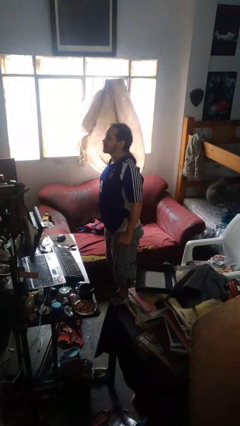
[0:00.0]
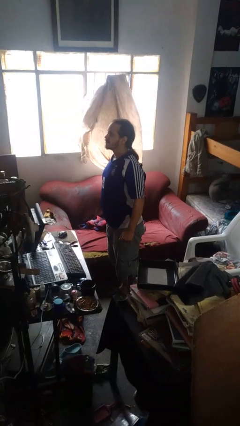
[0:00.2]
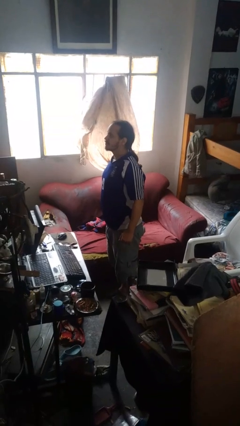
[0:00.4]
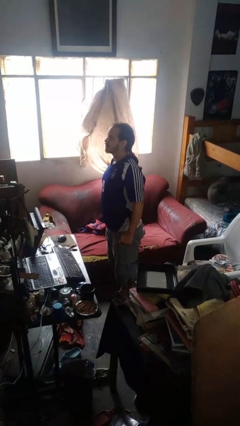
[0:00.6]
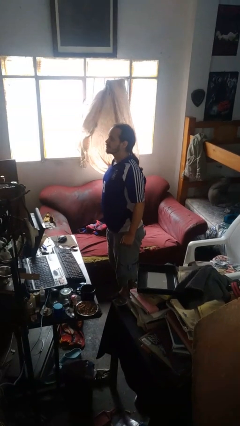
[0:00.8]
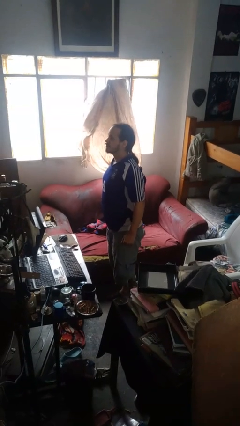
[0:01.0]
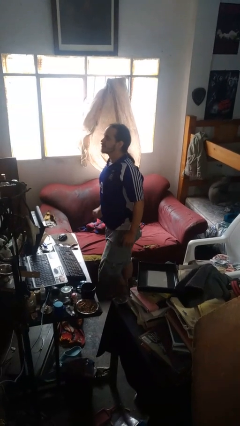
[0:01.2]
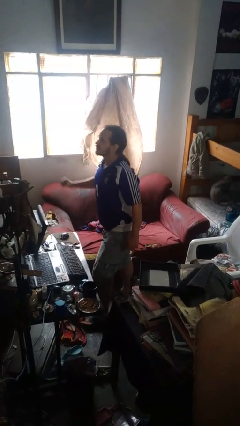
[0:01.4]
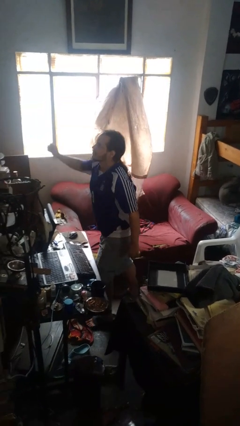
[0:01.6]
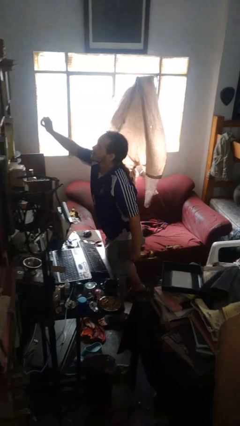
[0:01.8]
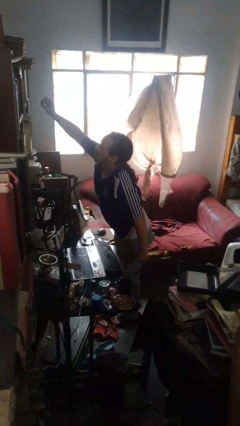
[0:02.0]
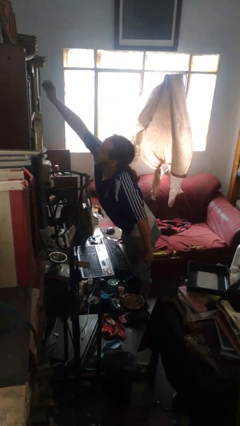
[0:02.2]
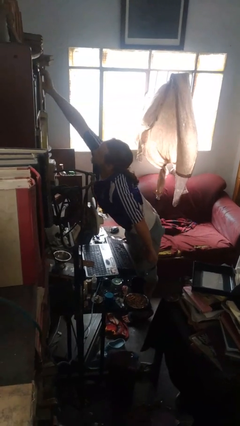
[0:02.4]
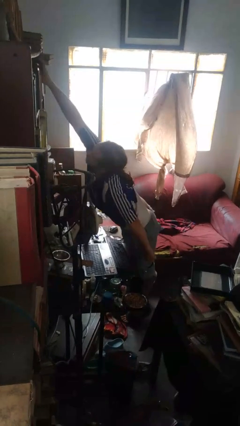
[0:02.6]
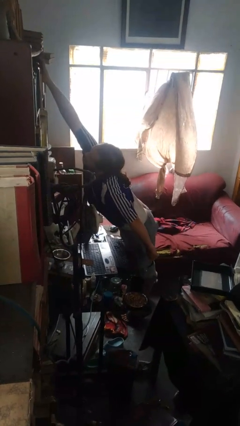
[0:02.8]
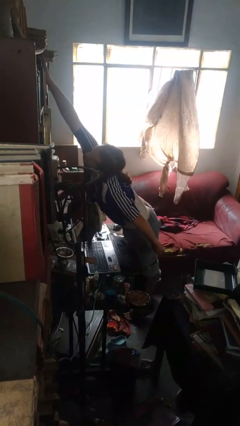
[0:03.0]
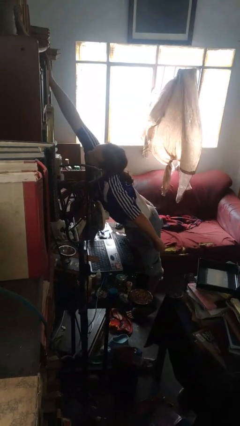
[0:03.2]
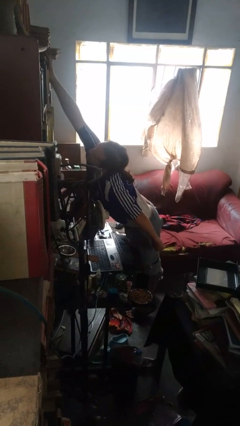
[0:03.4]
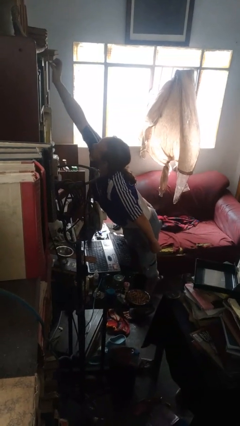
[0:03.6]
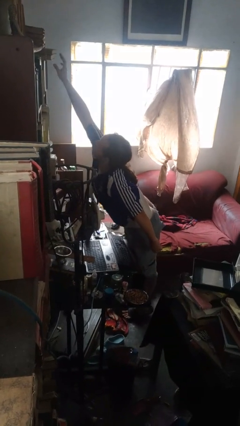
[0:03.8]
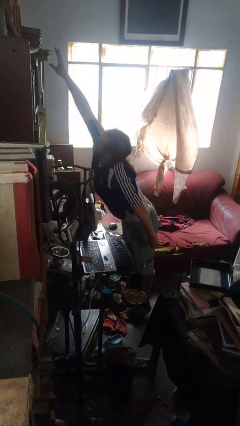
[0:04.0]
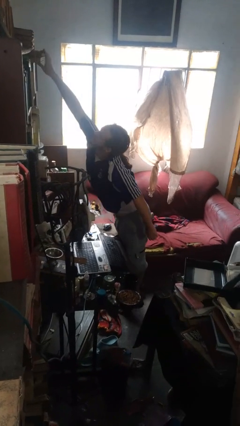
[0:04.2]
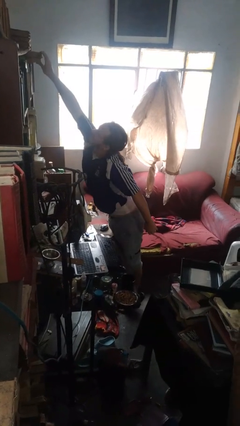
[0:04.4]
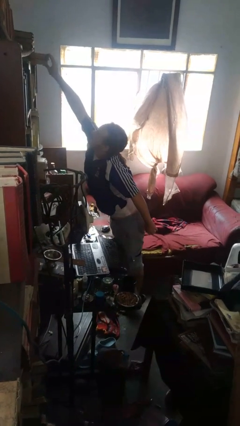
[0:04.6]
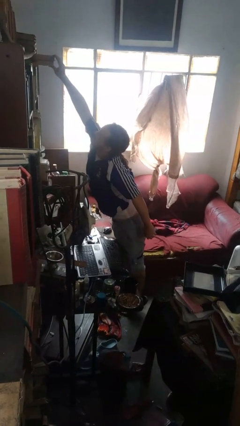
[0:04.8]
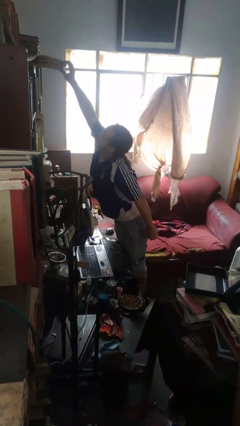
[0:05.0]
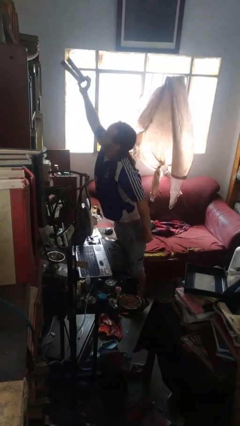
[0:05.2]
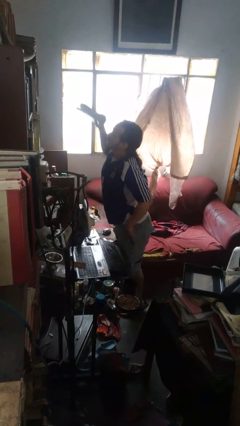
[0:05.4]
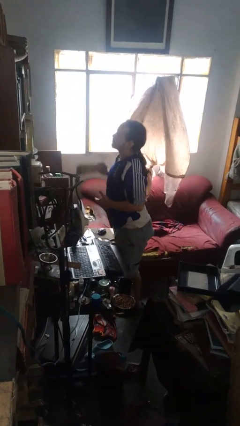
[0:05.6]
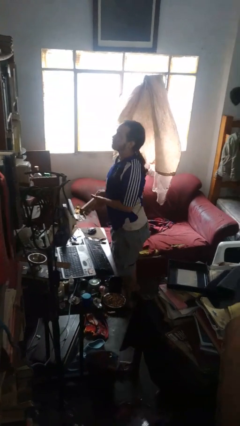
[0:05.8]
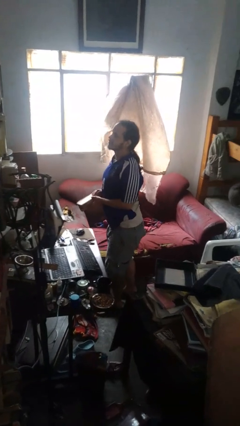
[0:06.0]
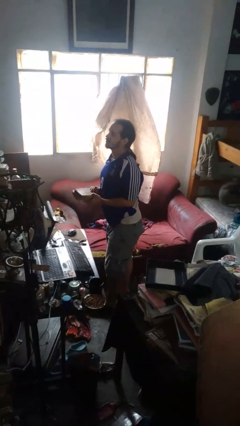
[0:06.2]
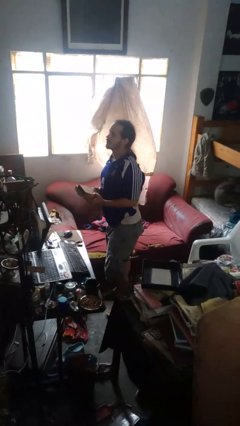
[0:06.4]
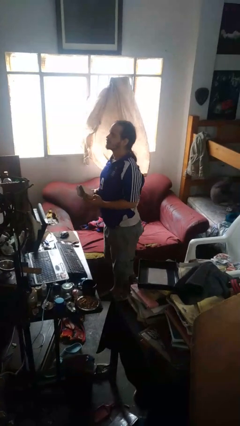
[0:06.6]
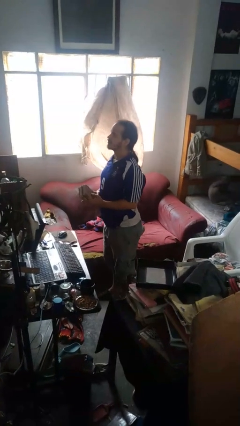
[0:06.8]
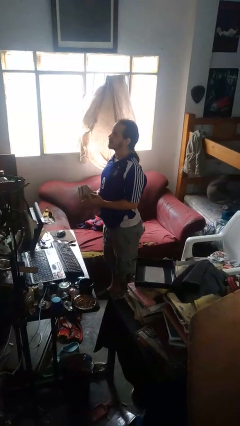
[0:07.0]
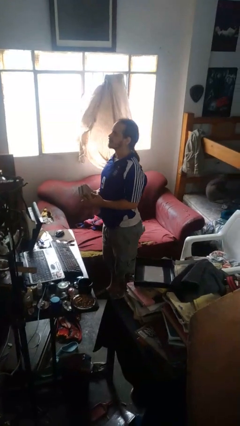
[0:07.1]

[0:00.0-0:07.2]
person picks up object from shelf

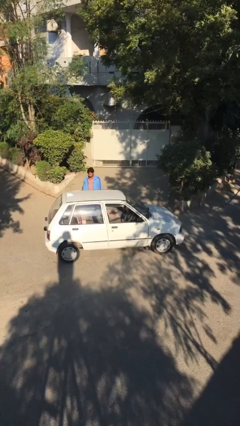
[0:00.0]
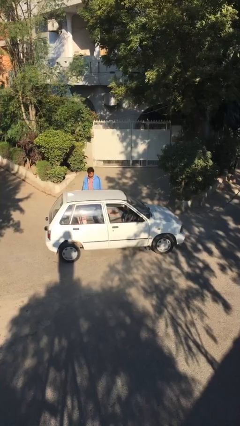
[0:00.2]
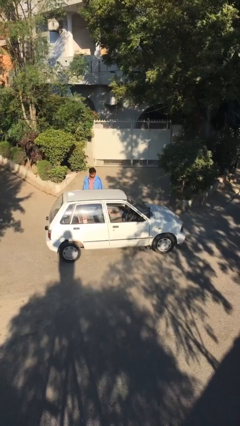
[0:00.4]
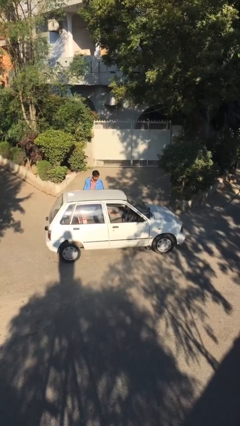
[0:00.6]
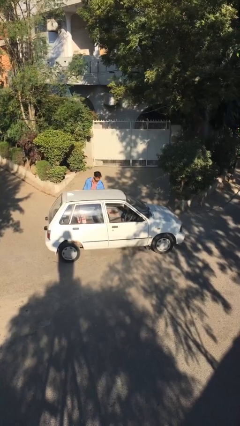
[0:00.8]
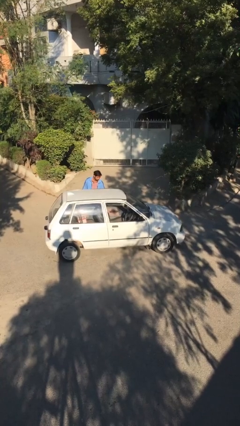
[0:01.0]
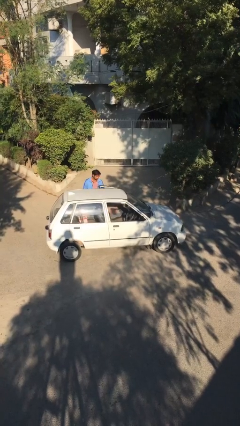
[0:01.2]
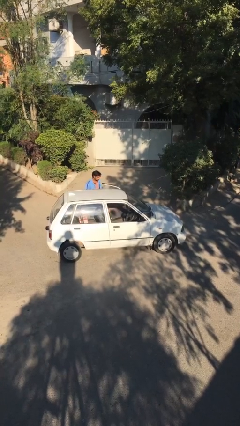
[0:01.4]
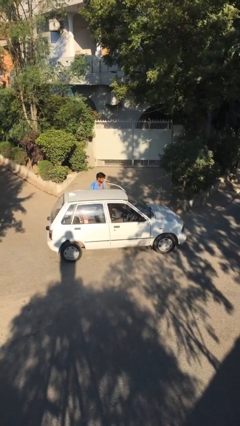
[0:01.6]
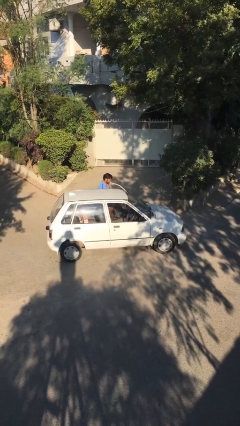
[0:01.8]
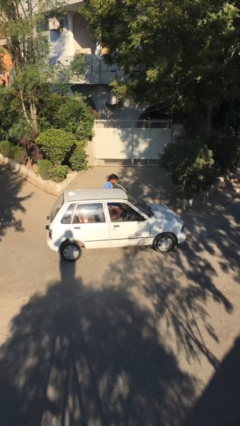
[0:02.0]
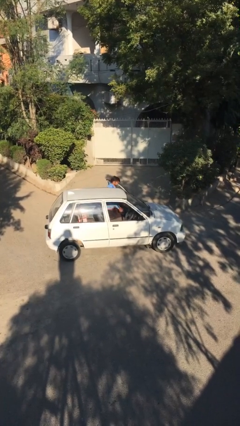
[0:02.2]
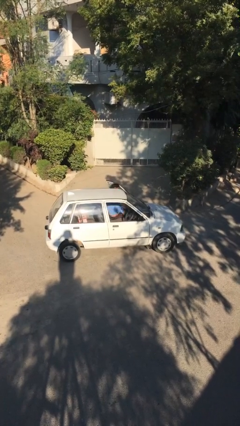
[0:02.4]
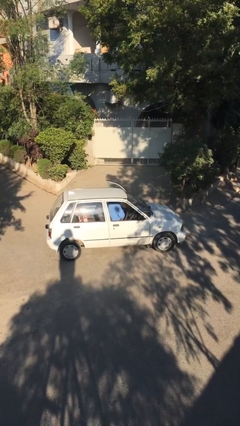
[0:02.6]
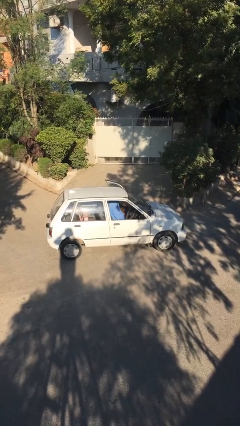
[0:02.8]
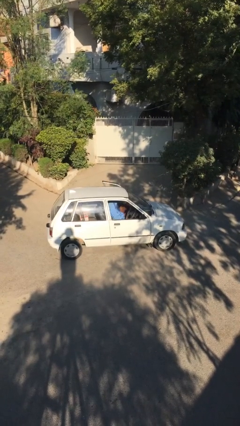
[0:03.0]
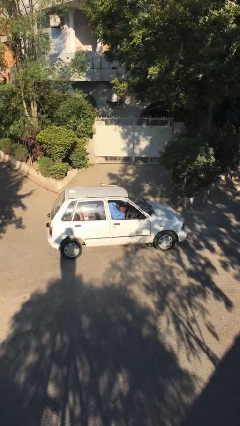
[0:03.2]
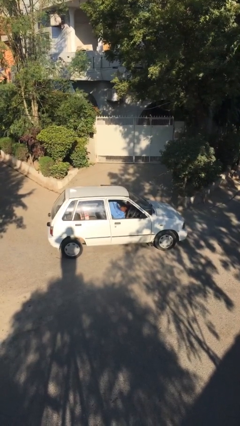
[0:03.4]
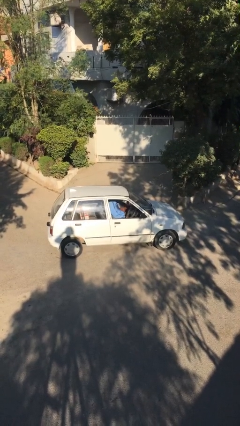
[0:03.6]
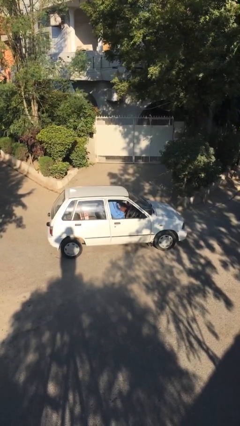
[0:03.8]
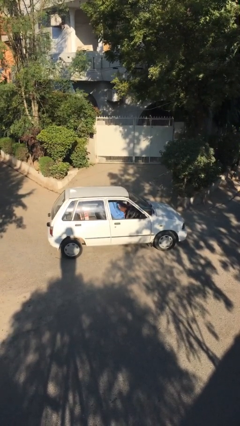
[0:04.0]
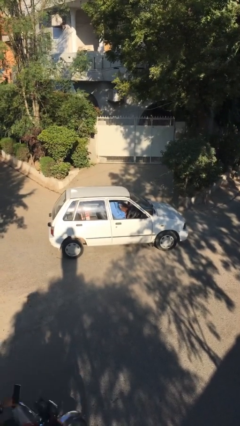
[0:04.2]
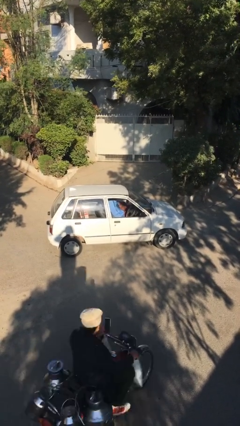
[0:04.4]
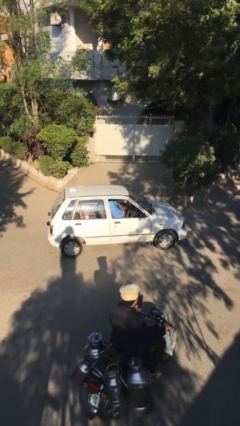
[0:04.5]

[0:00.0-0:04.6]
car picks up person

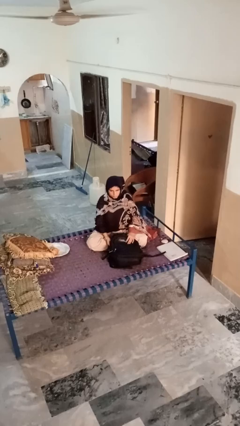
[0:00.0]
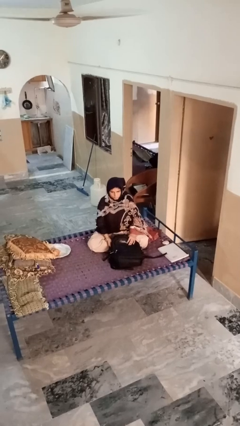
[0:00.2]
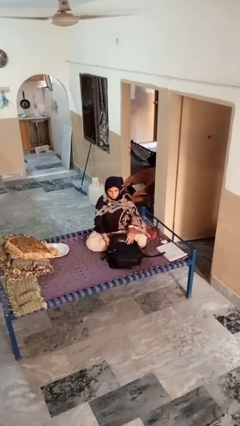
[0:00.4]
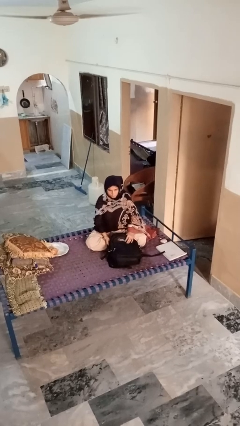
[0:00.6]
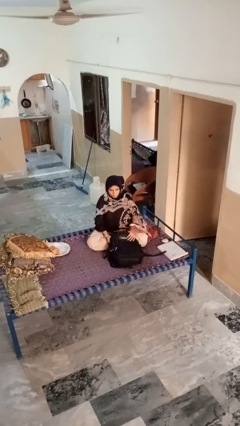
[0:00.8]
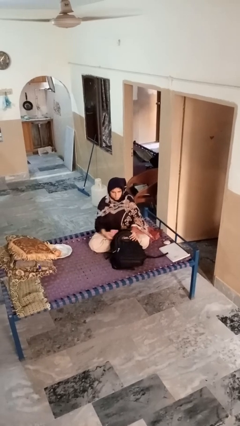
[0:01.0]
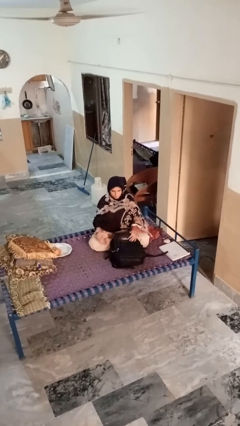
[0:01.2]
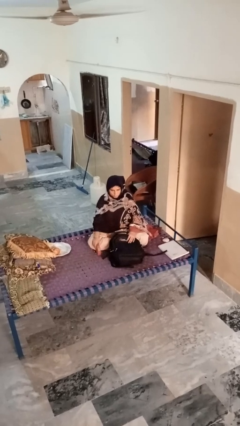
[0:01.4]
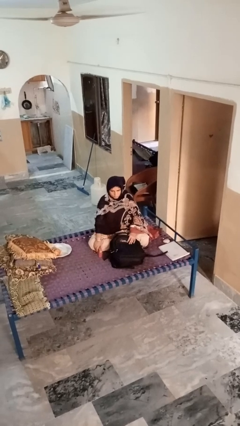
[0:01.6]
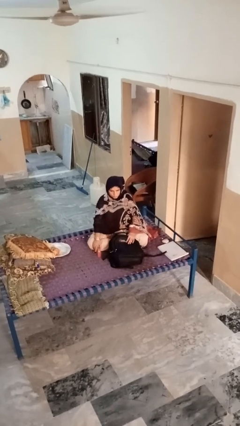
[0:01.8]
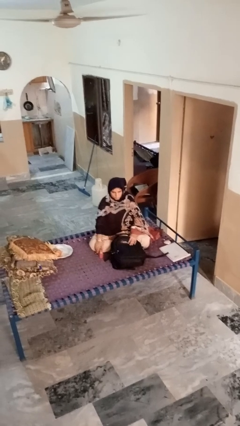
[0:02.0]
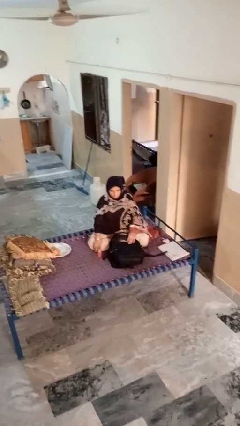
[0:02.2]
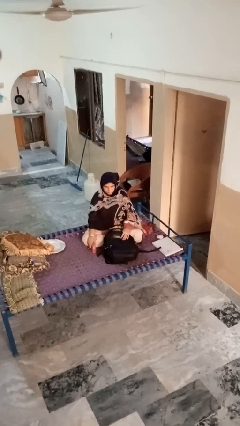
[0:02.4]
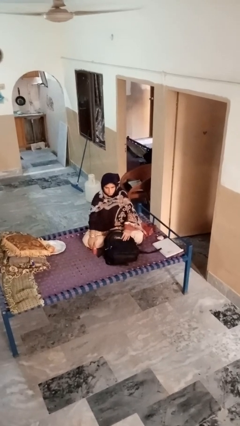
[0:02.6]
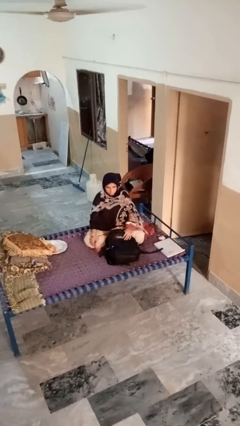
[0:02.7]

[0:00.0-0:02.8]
person takes object from bag

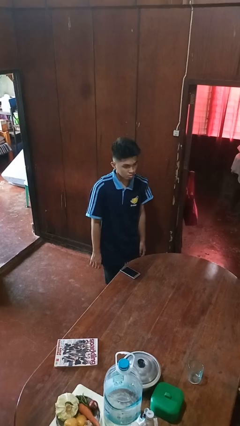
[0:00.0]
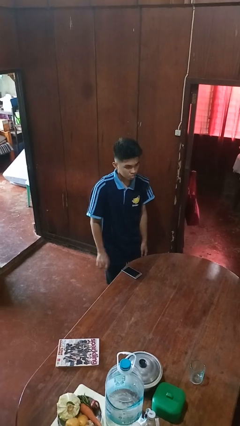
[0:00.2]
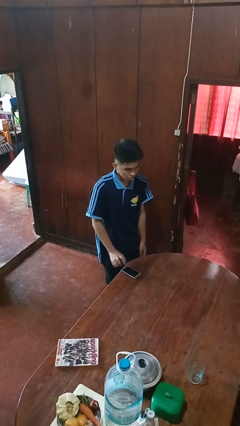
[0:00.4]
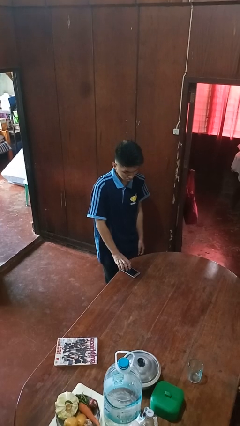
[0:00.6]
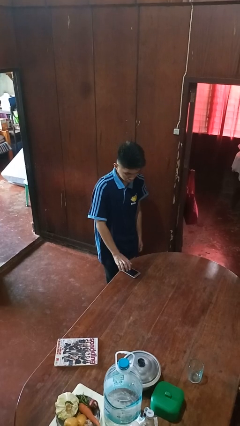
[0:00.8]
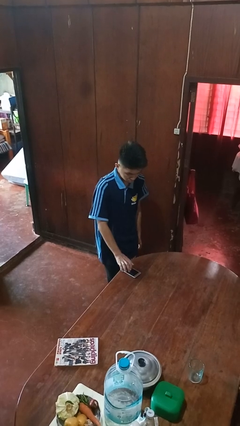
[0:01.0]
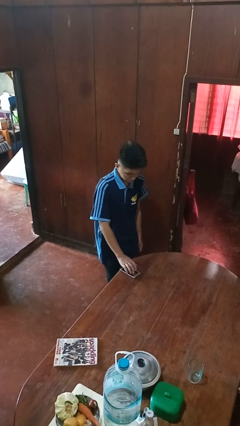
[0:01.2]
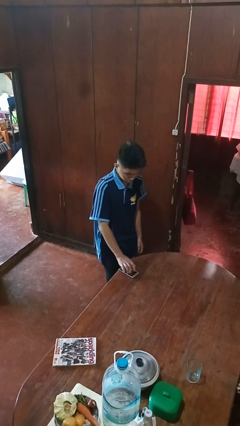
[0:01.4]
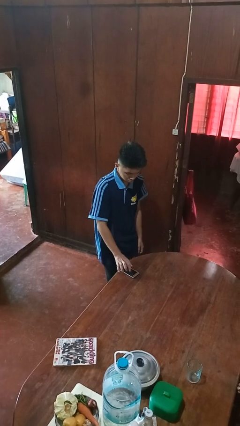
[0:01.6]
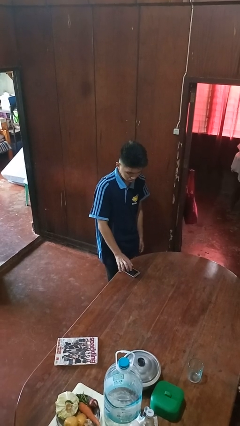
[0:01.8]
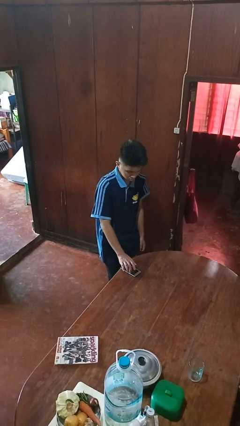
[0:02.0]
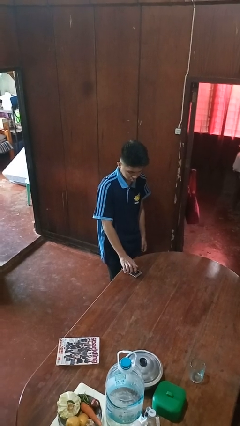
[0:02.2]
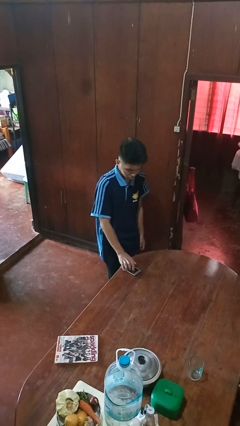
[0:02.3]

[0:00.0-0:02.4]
person taps object with finger

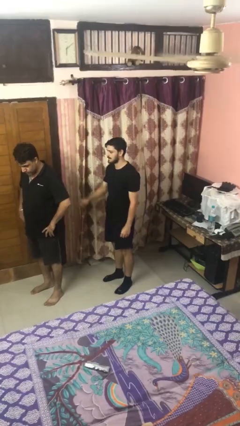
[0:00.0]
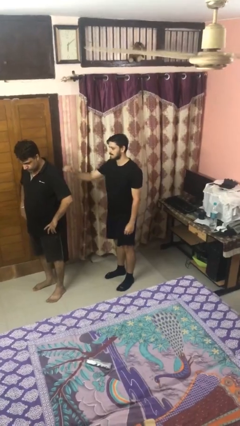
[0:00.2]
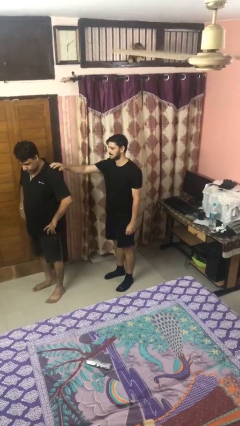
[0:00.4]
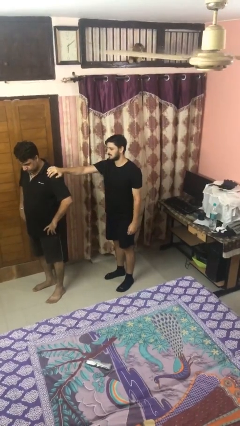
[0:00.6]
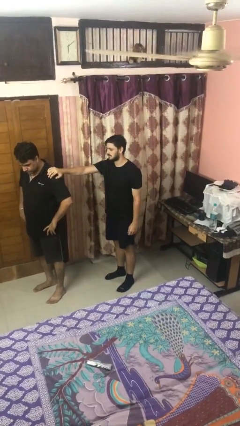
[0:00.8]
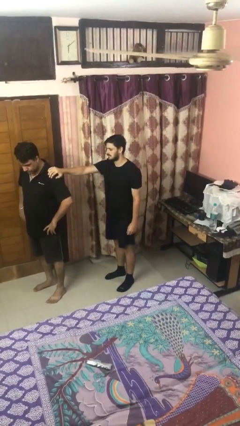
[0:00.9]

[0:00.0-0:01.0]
person grabs person by shoulder
